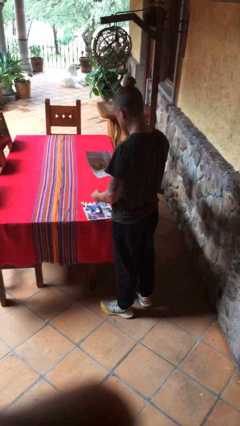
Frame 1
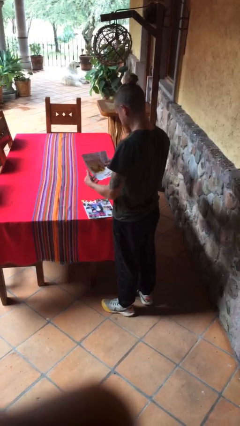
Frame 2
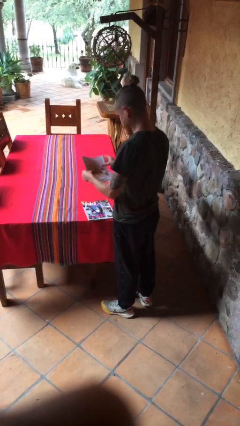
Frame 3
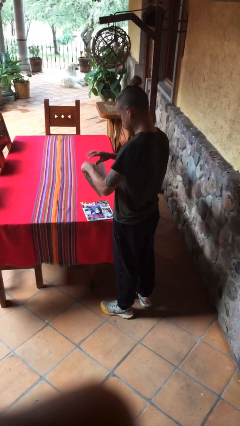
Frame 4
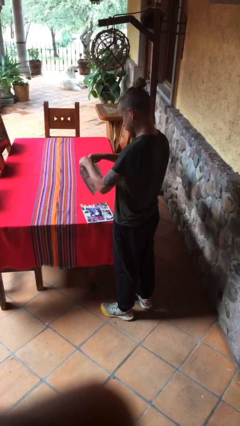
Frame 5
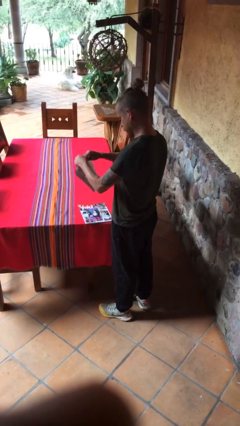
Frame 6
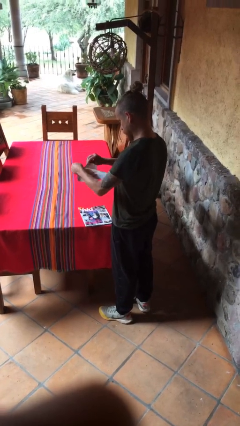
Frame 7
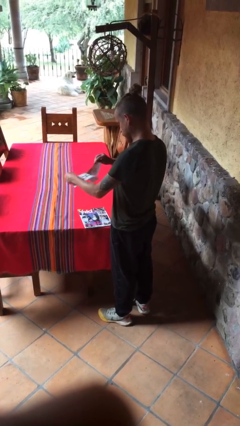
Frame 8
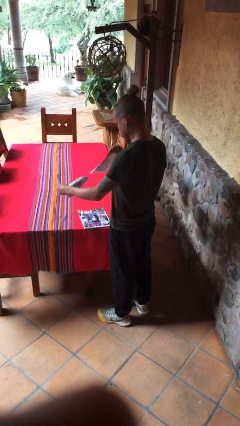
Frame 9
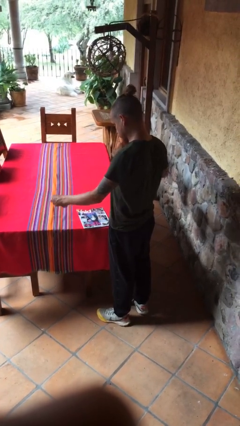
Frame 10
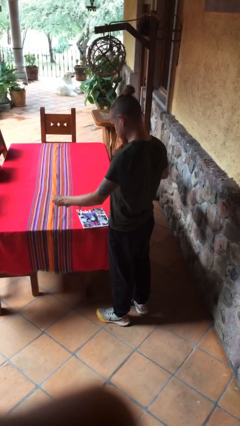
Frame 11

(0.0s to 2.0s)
person tears paper

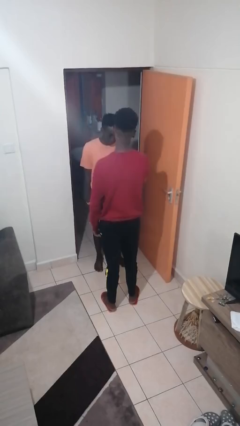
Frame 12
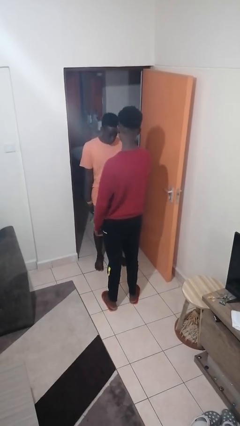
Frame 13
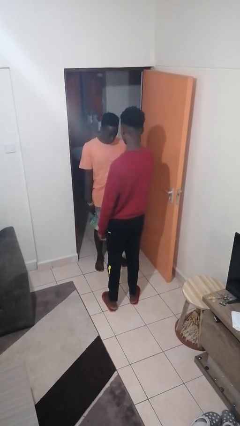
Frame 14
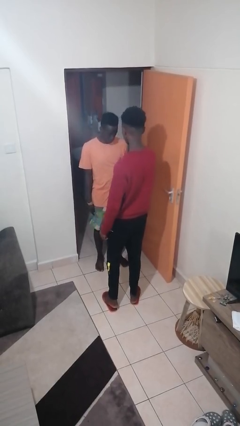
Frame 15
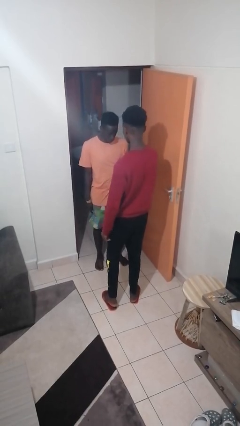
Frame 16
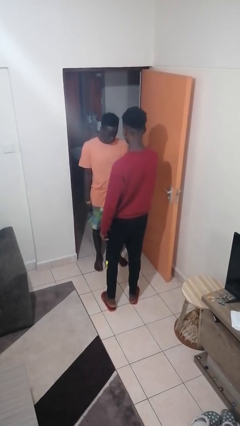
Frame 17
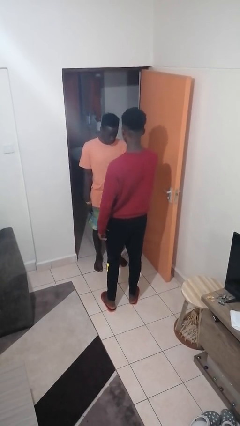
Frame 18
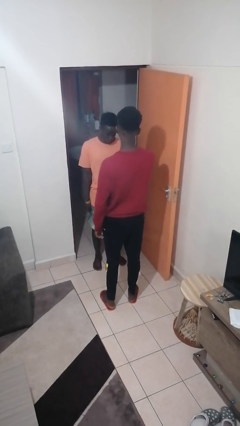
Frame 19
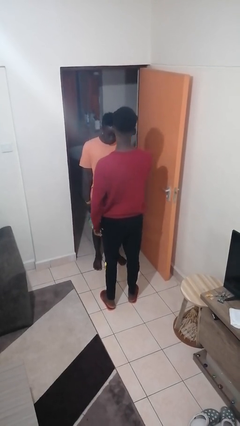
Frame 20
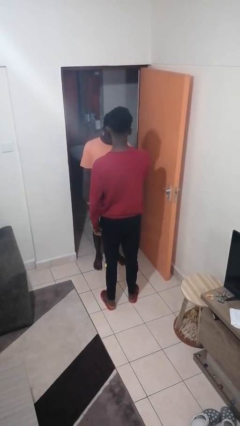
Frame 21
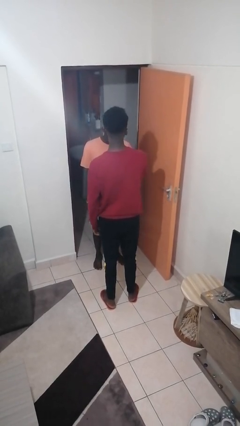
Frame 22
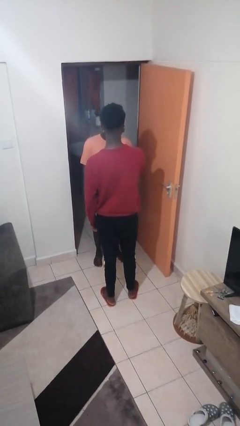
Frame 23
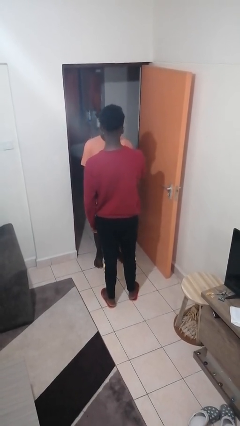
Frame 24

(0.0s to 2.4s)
person grabs person by bicep

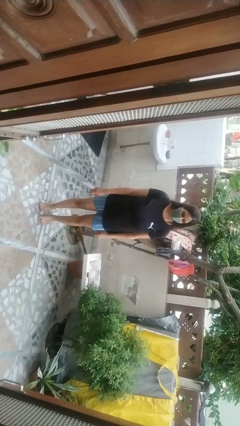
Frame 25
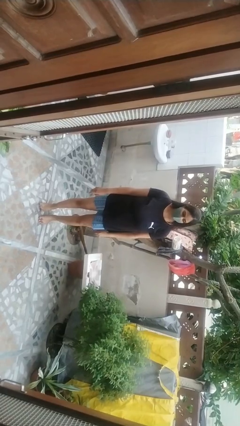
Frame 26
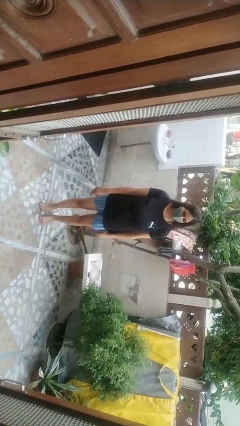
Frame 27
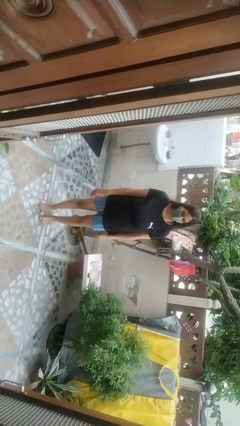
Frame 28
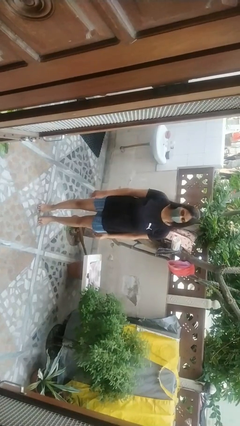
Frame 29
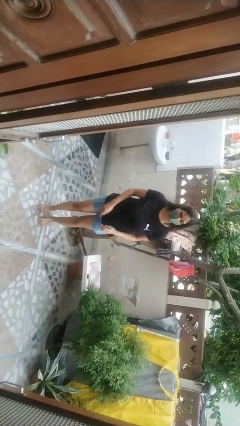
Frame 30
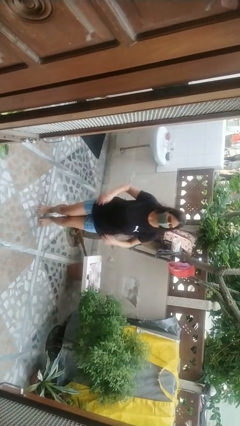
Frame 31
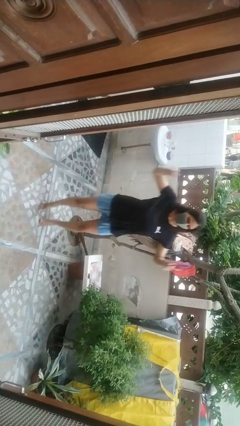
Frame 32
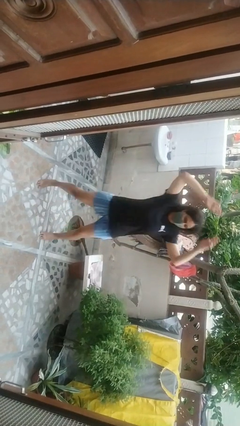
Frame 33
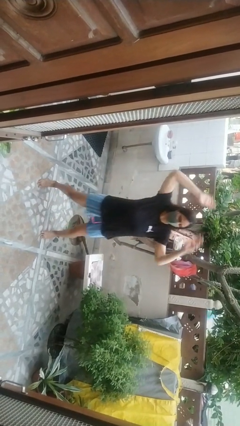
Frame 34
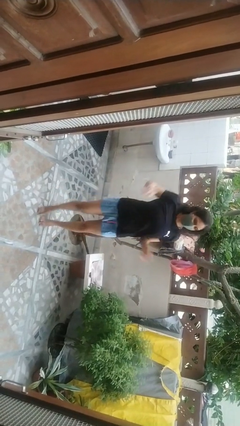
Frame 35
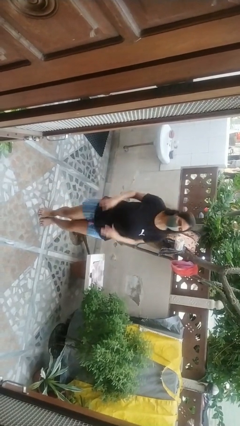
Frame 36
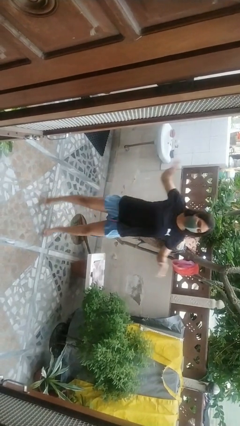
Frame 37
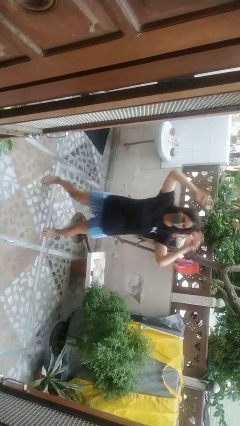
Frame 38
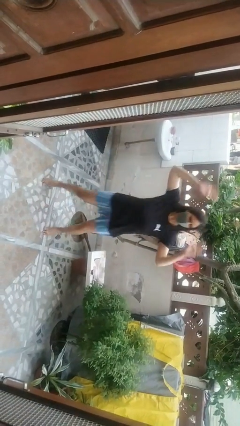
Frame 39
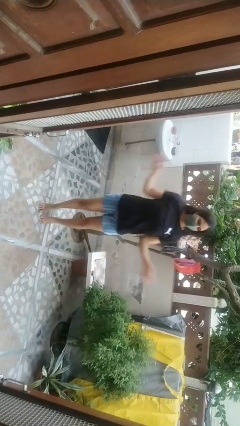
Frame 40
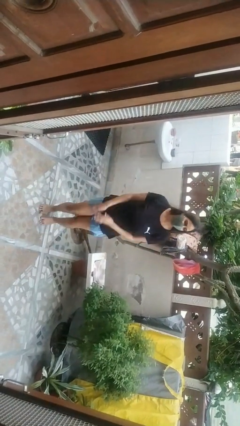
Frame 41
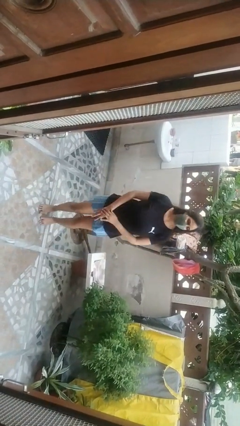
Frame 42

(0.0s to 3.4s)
person exercises with jumping jacks

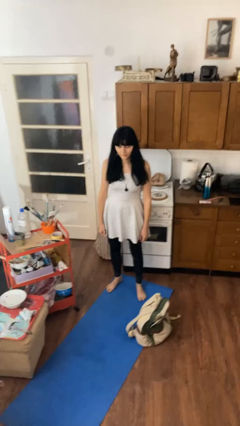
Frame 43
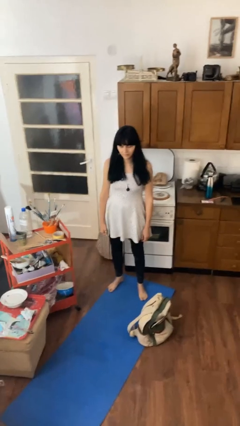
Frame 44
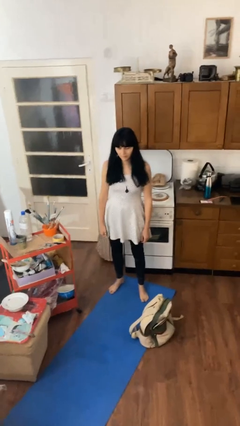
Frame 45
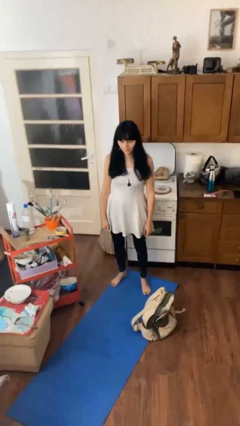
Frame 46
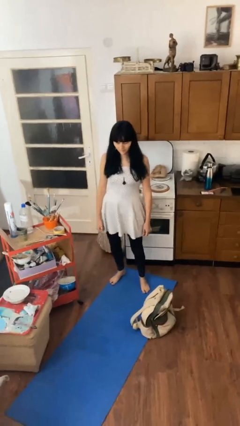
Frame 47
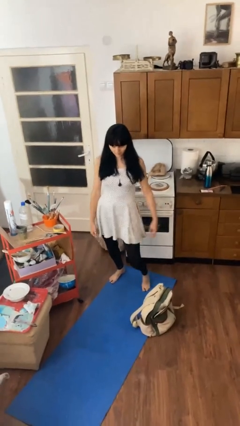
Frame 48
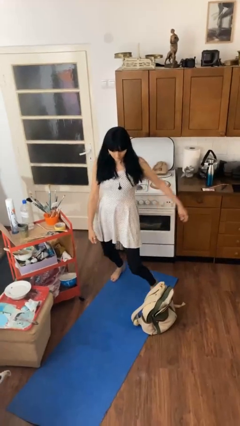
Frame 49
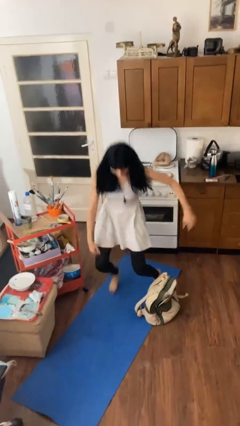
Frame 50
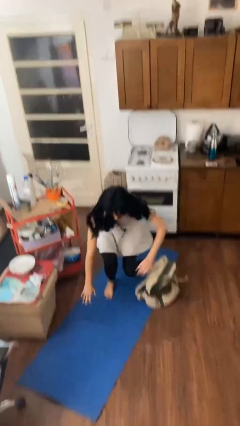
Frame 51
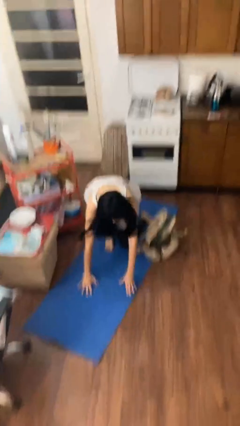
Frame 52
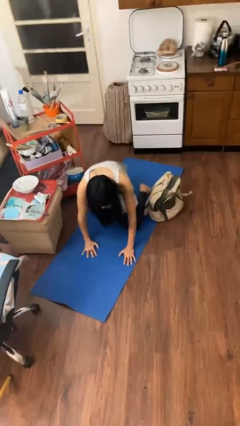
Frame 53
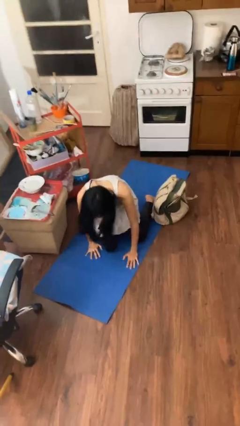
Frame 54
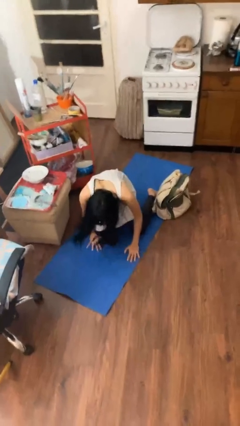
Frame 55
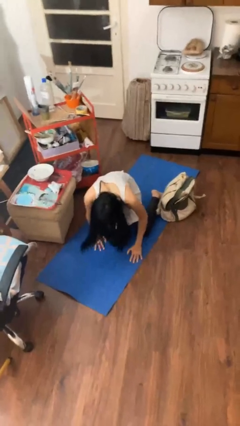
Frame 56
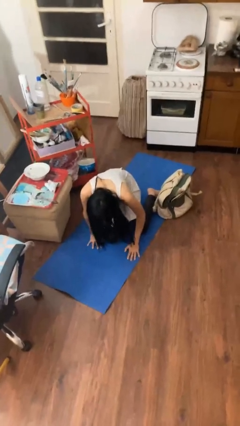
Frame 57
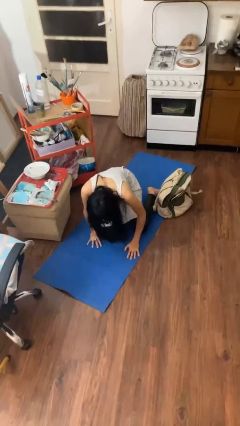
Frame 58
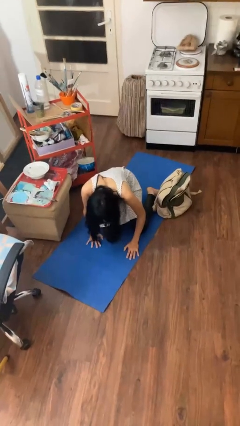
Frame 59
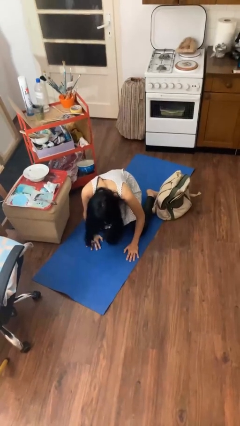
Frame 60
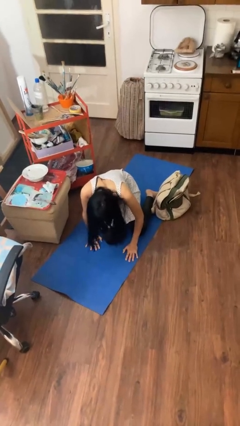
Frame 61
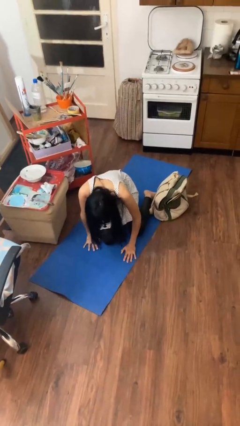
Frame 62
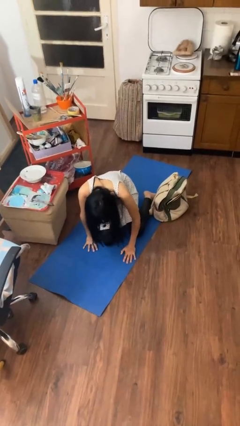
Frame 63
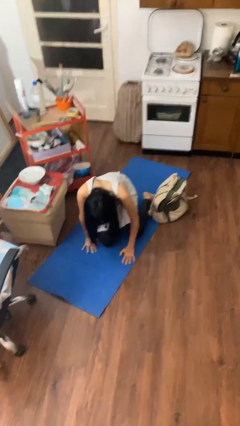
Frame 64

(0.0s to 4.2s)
person trips on object on floor

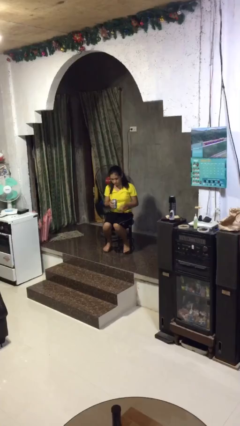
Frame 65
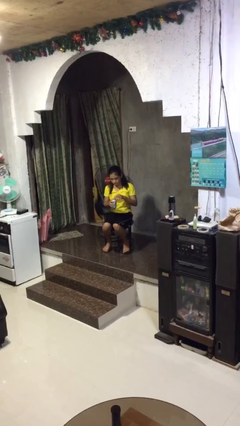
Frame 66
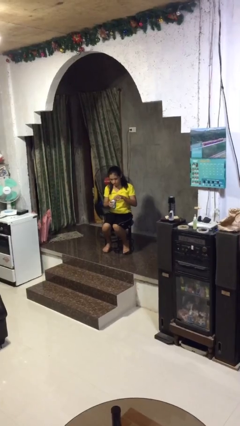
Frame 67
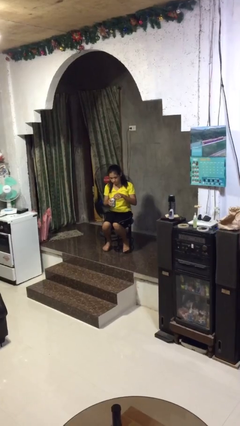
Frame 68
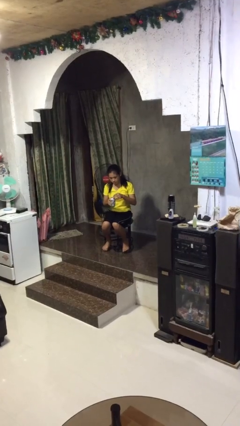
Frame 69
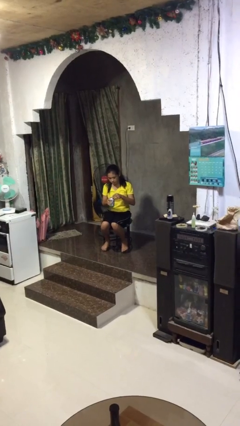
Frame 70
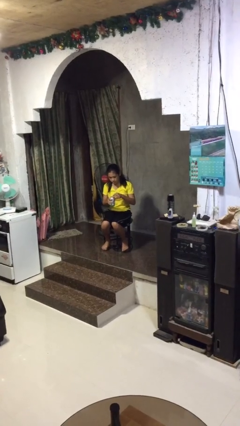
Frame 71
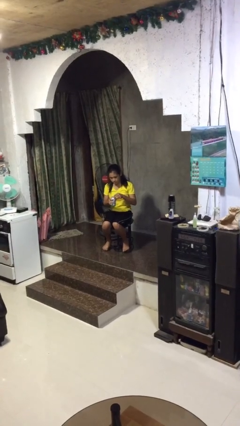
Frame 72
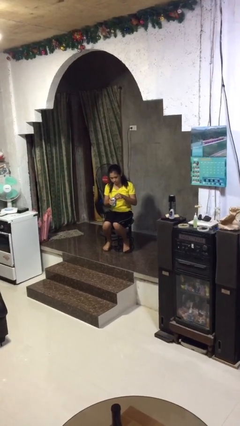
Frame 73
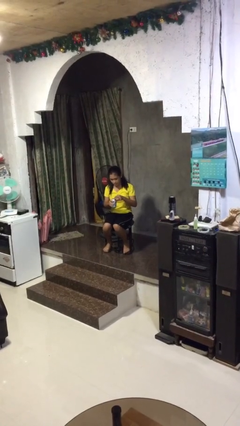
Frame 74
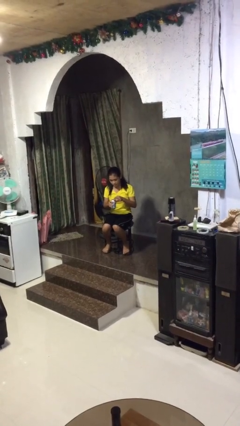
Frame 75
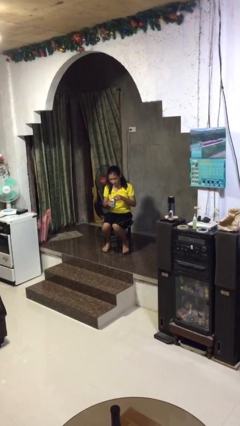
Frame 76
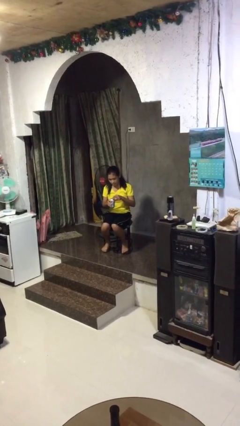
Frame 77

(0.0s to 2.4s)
person opens beverage can

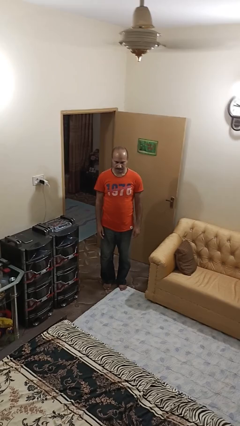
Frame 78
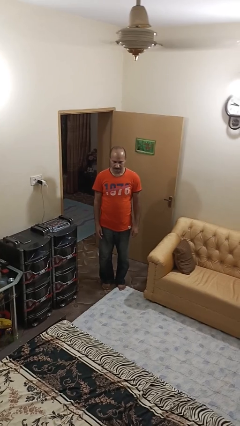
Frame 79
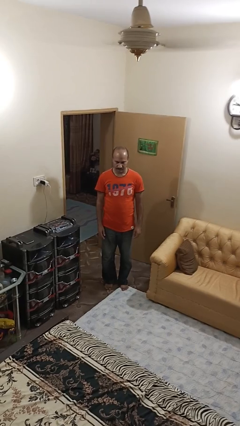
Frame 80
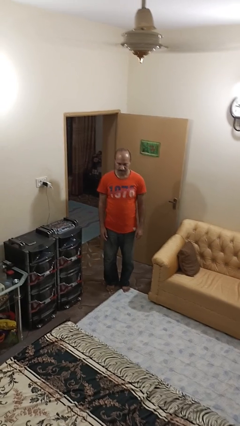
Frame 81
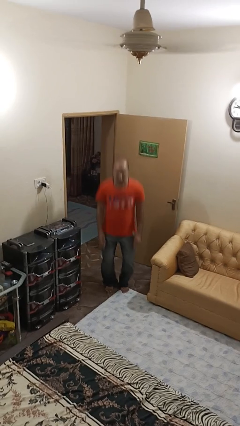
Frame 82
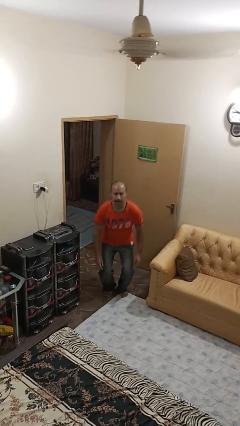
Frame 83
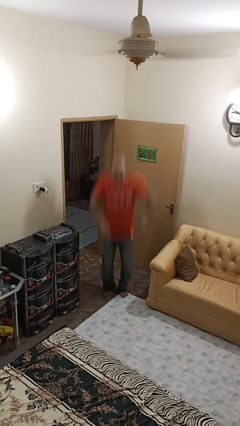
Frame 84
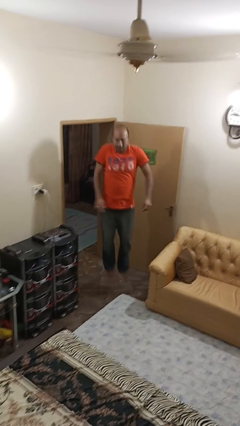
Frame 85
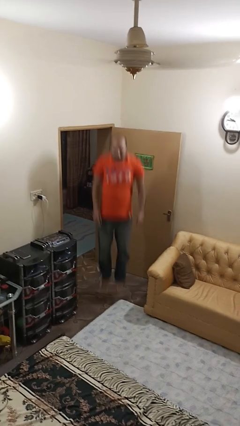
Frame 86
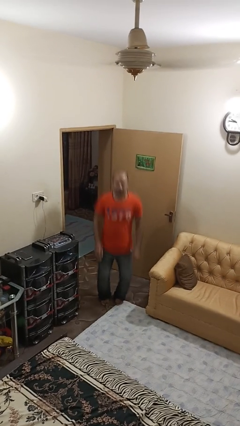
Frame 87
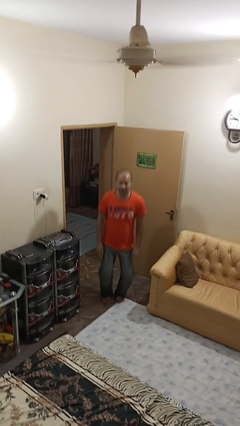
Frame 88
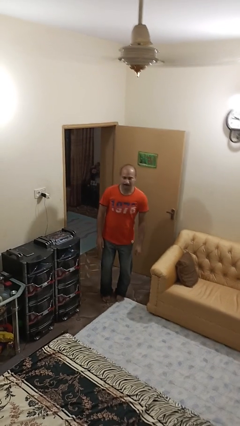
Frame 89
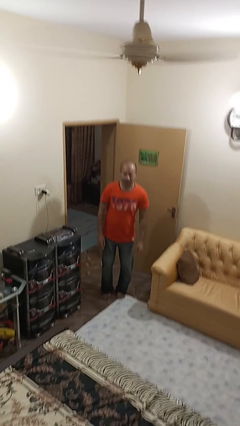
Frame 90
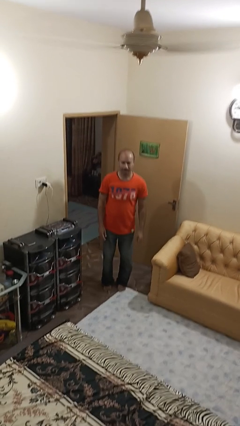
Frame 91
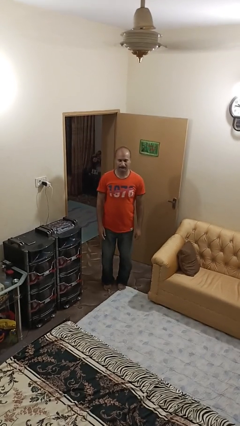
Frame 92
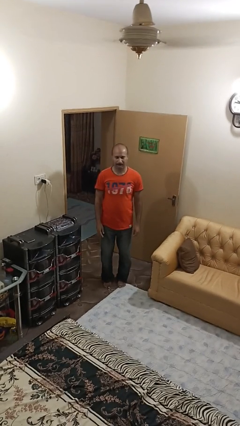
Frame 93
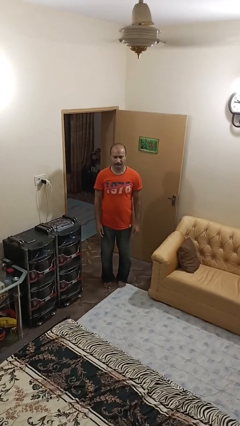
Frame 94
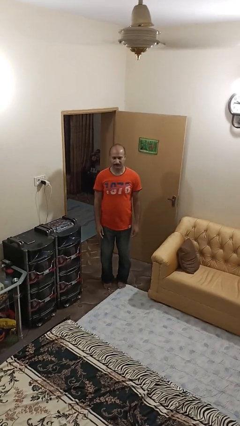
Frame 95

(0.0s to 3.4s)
person jumps
